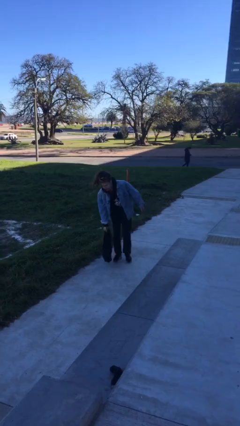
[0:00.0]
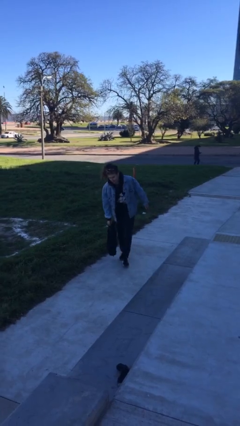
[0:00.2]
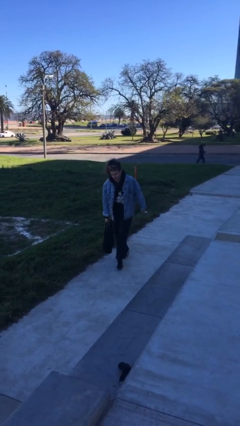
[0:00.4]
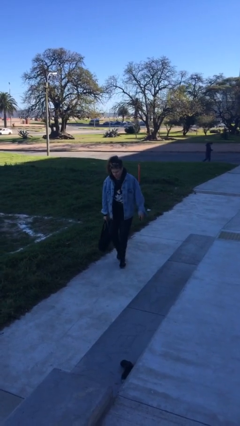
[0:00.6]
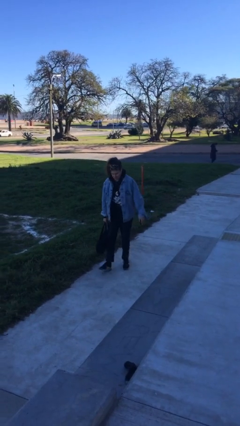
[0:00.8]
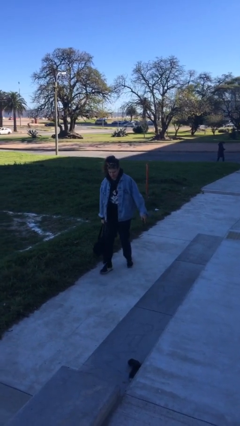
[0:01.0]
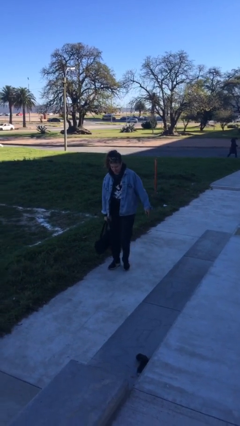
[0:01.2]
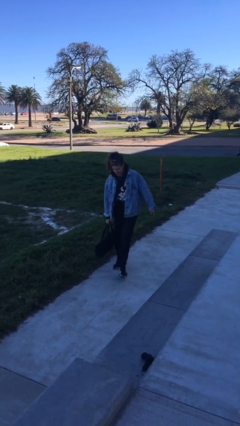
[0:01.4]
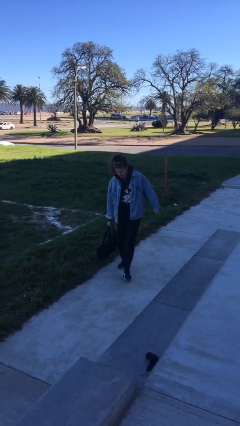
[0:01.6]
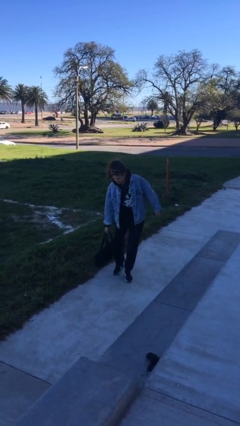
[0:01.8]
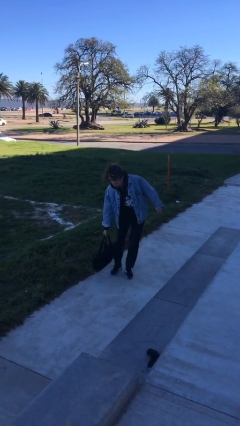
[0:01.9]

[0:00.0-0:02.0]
person carries heavy object

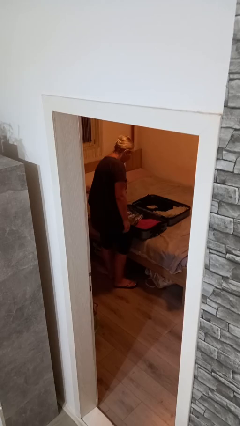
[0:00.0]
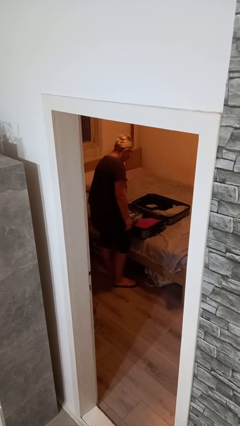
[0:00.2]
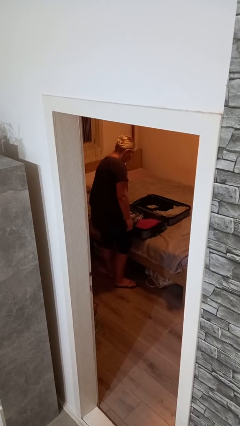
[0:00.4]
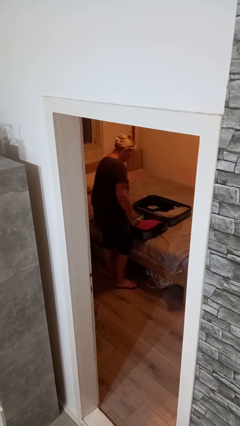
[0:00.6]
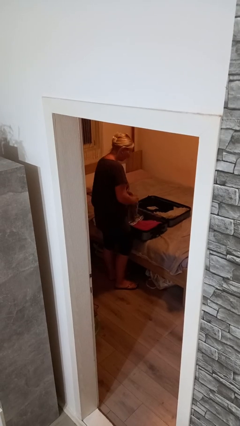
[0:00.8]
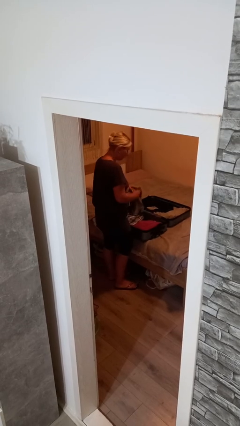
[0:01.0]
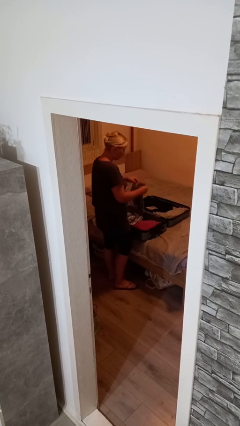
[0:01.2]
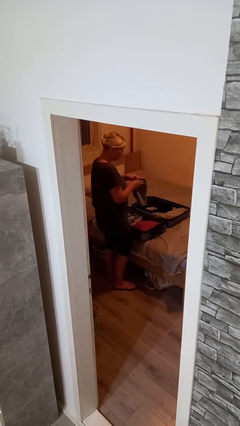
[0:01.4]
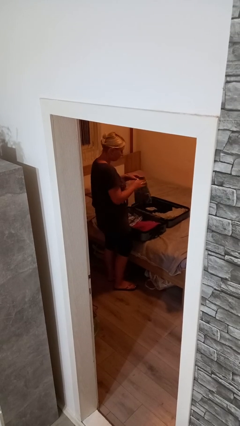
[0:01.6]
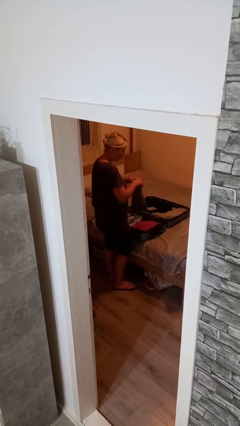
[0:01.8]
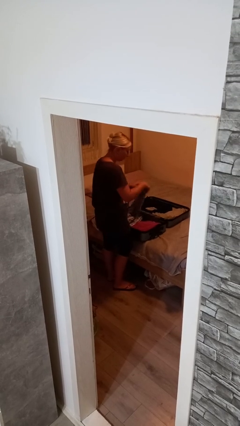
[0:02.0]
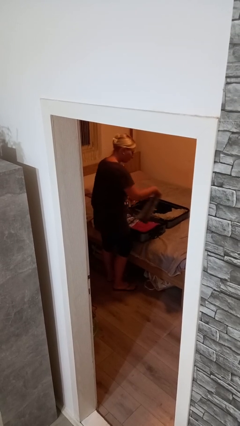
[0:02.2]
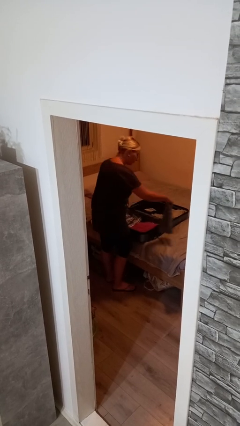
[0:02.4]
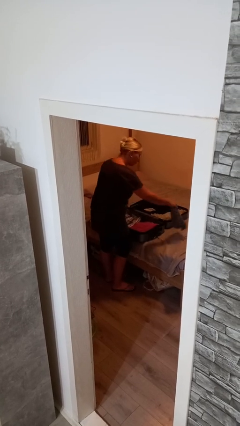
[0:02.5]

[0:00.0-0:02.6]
person unloads clothes from suitcase

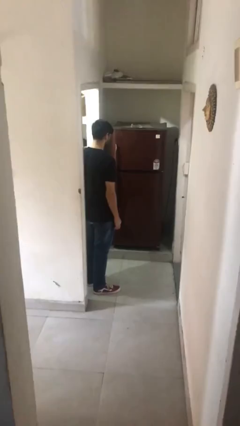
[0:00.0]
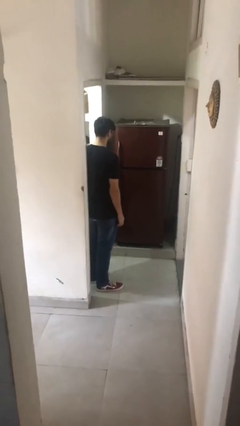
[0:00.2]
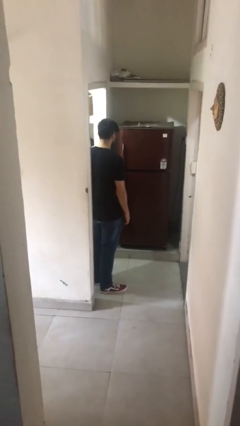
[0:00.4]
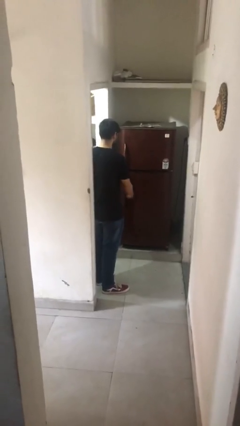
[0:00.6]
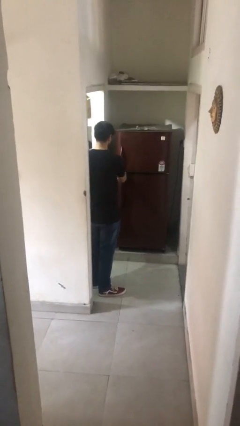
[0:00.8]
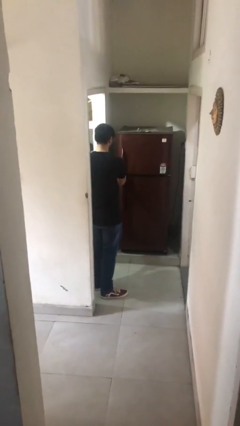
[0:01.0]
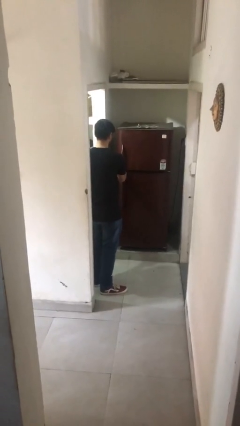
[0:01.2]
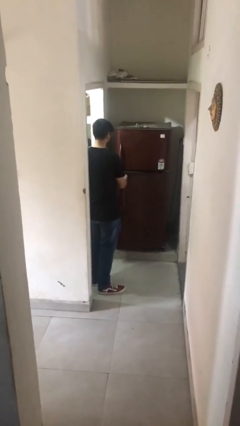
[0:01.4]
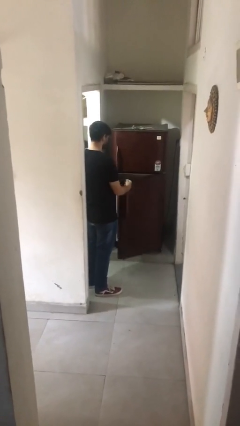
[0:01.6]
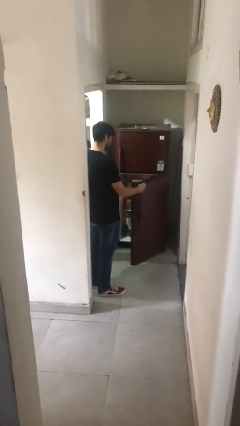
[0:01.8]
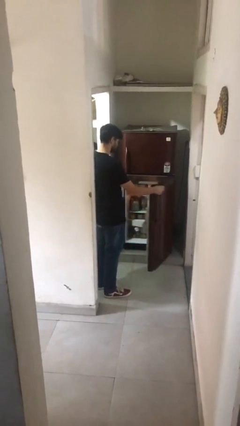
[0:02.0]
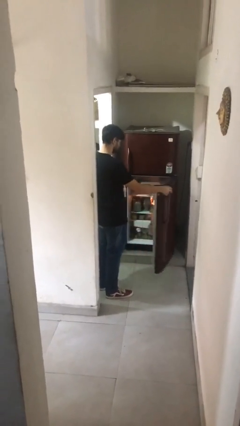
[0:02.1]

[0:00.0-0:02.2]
person opens refrigerator

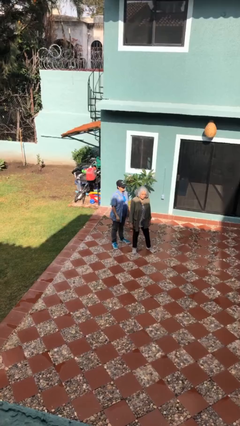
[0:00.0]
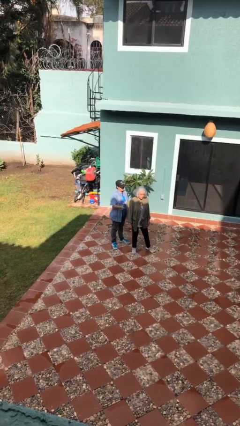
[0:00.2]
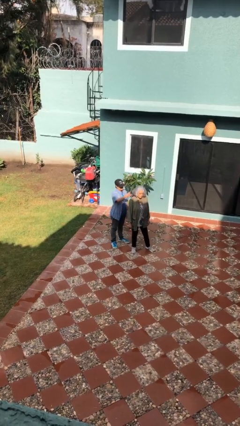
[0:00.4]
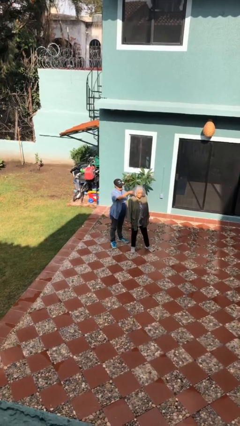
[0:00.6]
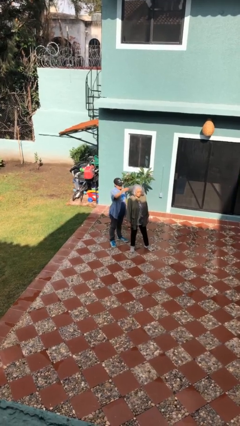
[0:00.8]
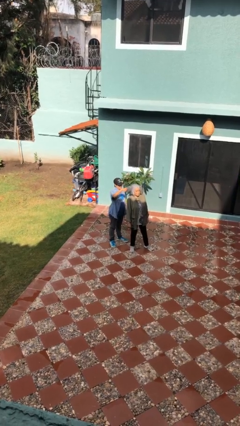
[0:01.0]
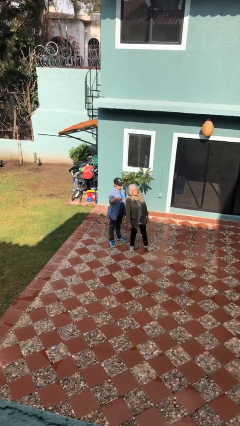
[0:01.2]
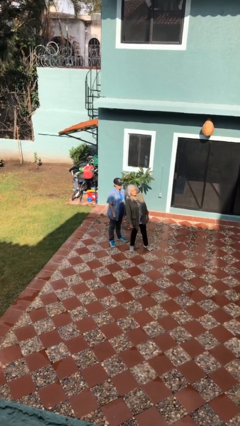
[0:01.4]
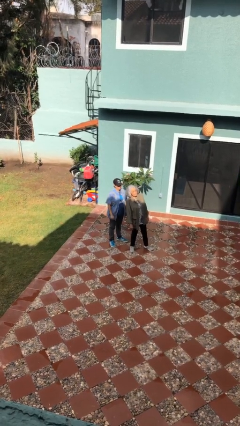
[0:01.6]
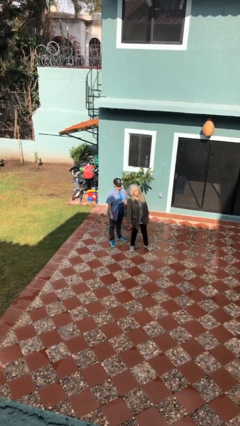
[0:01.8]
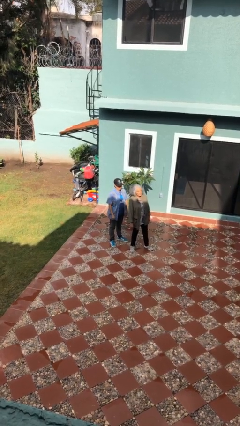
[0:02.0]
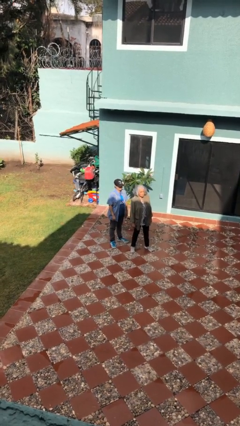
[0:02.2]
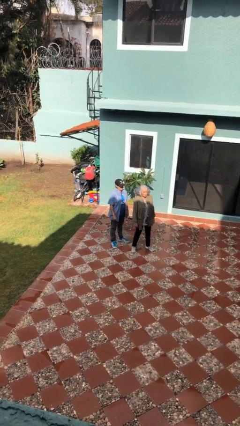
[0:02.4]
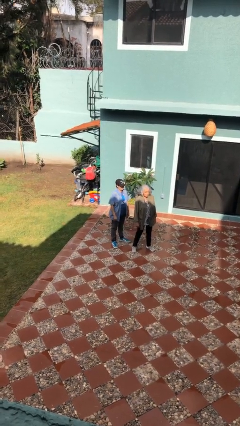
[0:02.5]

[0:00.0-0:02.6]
person grabs person by hair

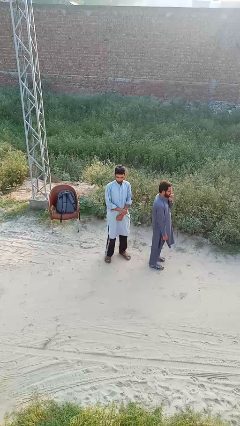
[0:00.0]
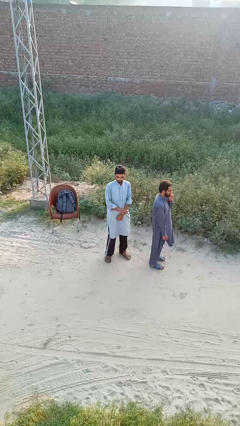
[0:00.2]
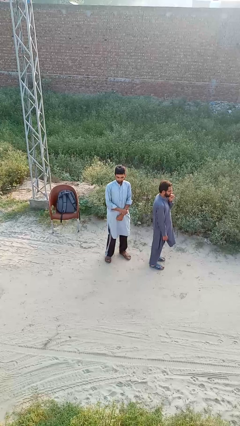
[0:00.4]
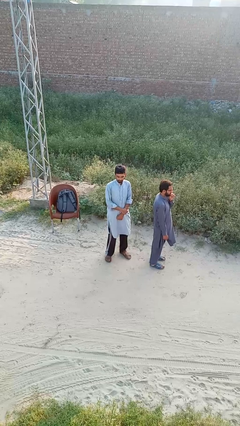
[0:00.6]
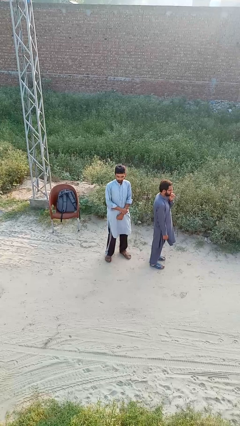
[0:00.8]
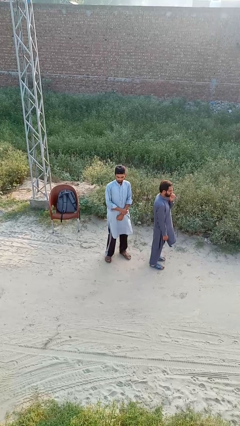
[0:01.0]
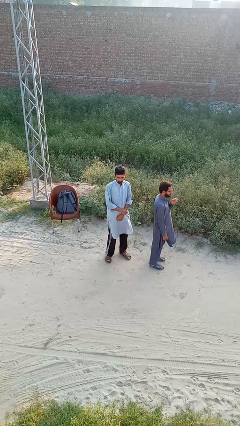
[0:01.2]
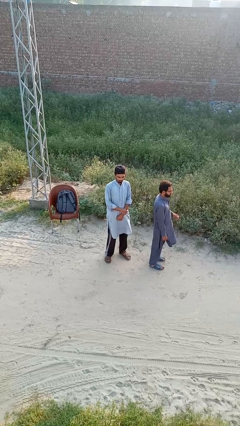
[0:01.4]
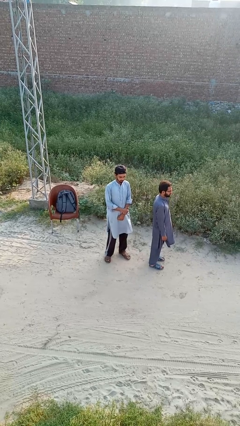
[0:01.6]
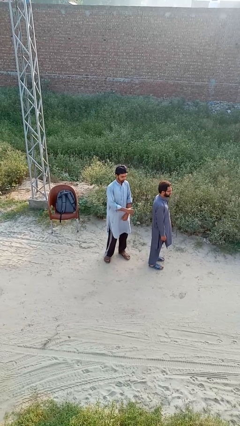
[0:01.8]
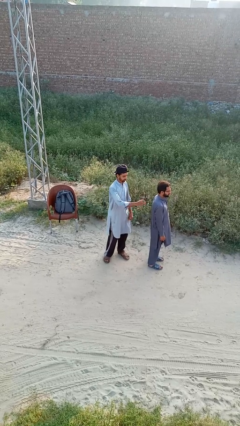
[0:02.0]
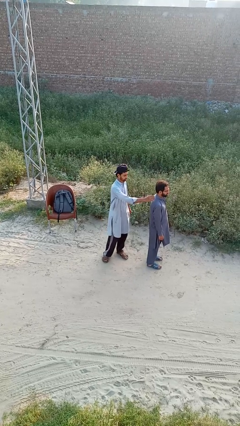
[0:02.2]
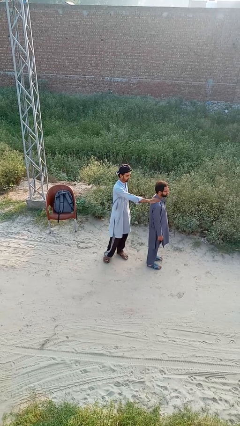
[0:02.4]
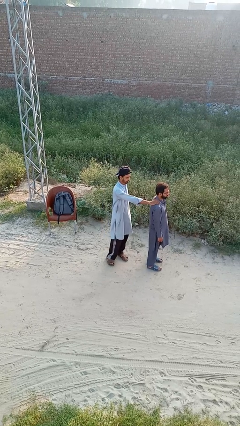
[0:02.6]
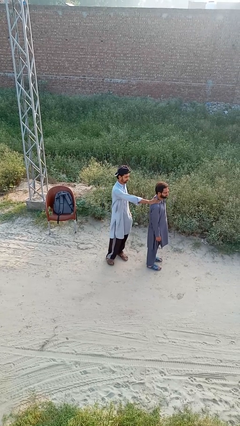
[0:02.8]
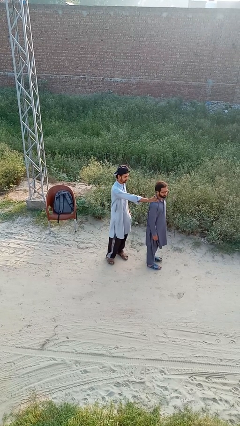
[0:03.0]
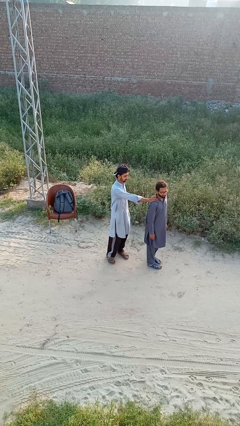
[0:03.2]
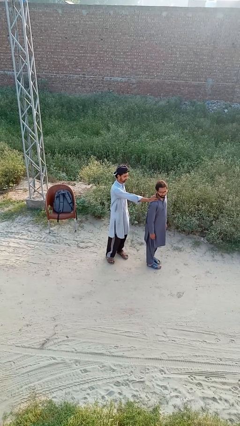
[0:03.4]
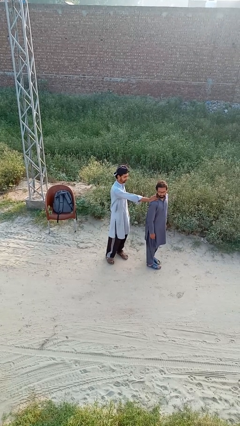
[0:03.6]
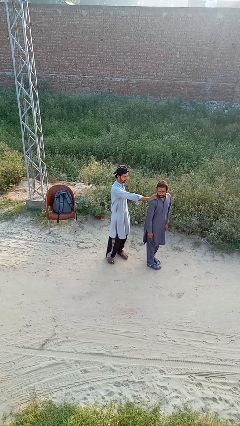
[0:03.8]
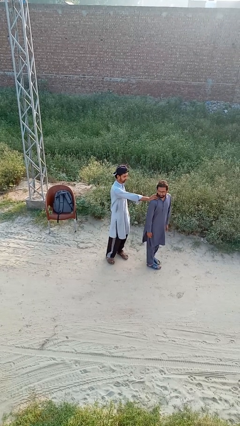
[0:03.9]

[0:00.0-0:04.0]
person grabs person by shoulder

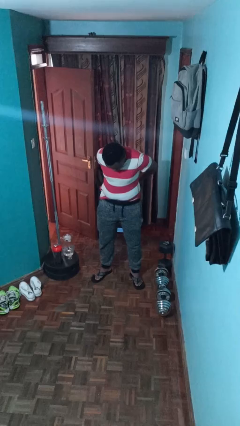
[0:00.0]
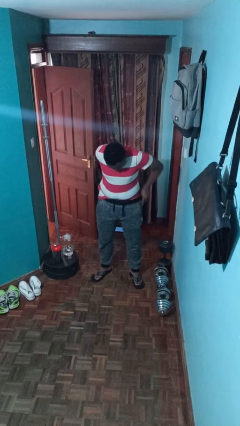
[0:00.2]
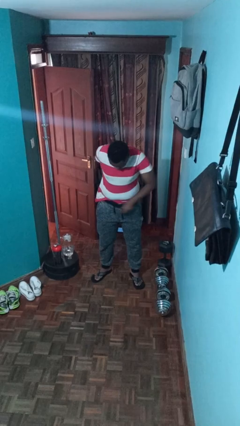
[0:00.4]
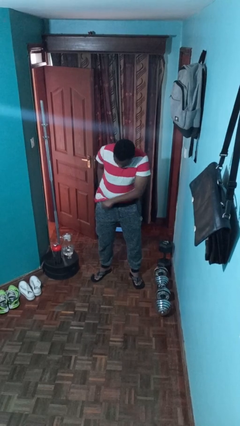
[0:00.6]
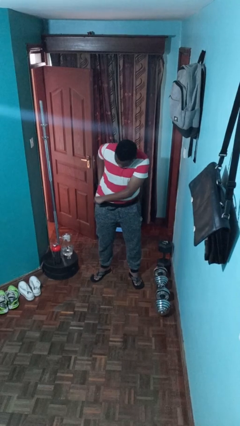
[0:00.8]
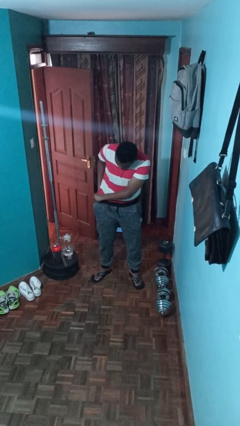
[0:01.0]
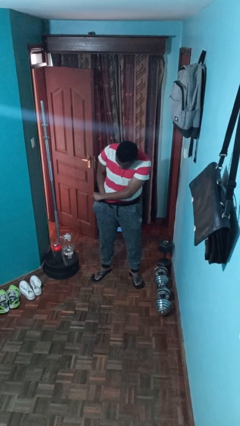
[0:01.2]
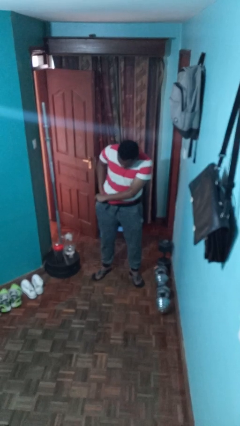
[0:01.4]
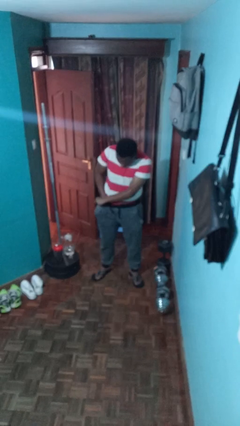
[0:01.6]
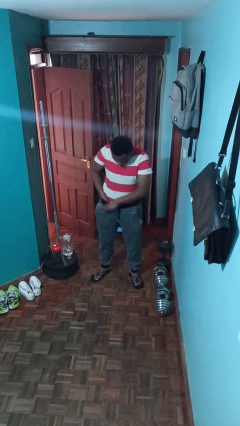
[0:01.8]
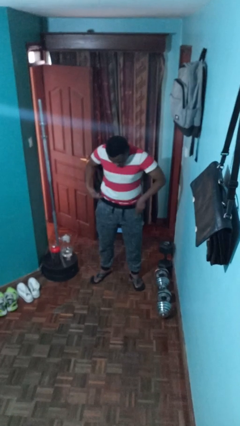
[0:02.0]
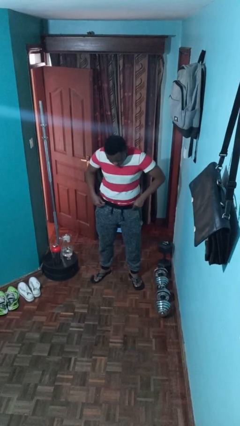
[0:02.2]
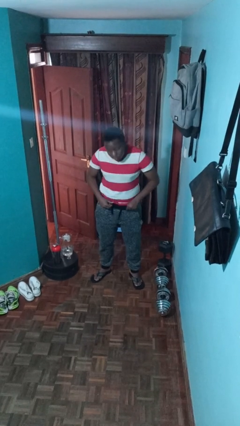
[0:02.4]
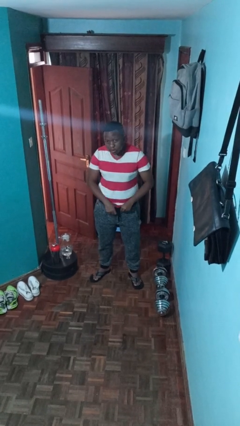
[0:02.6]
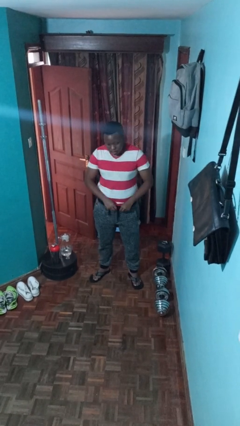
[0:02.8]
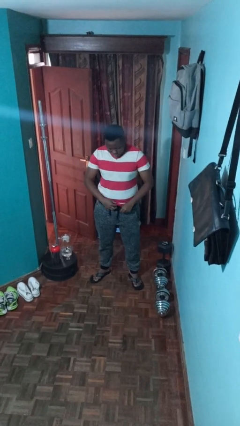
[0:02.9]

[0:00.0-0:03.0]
person tucks in shirt

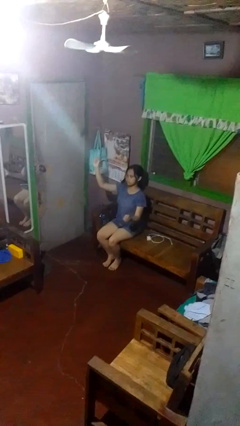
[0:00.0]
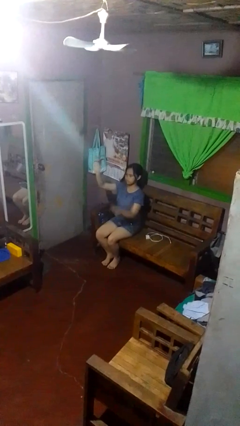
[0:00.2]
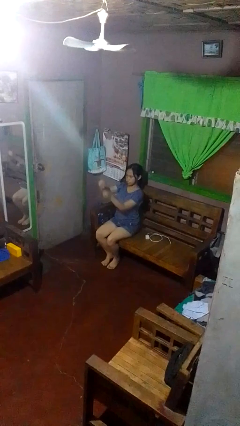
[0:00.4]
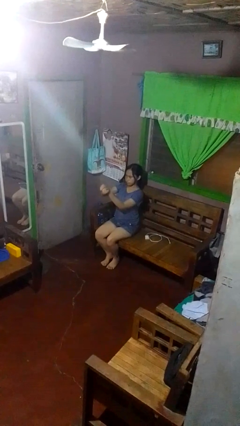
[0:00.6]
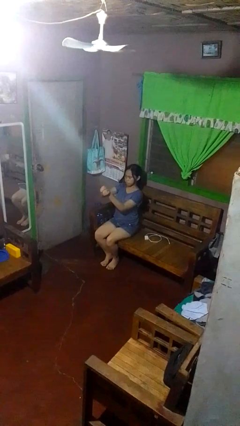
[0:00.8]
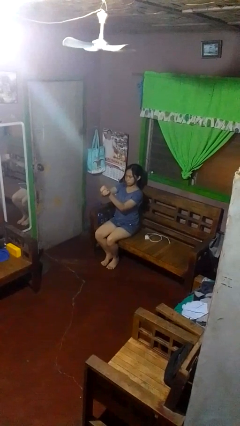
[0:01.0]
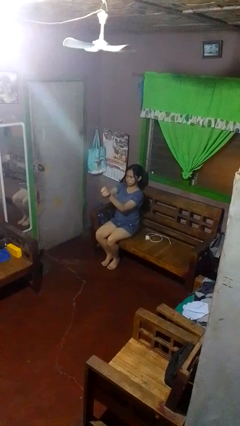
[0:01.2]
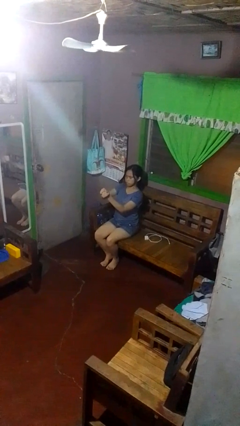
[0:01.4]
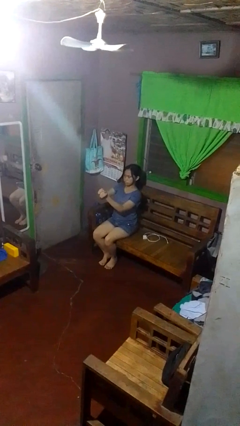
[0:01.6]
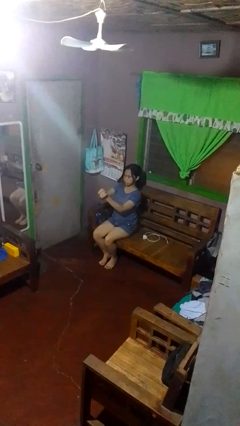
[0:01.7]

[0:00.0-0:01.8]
person gestures zoom out
